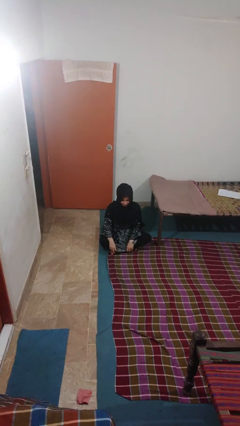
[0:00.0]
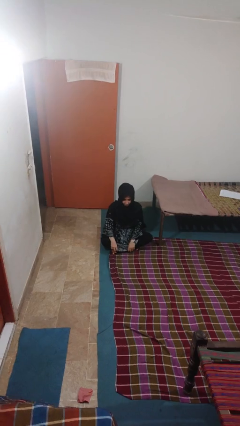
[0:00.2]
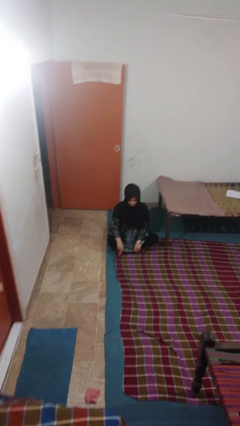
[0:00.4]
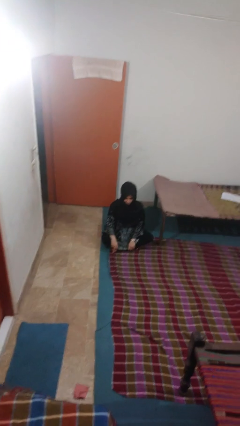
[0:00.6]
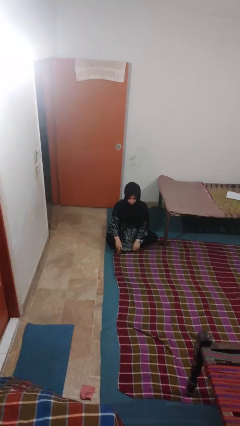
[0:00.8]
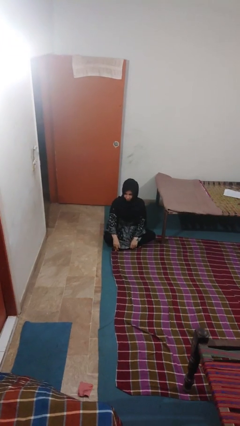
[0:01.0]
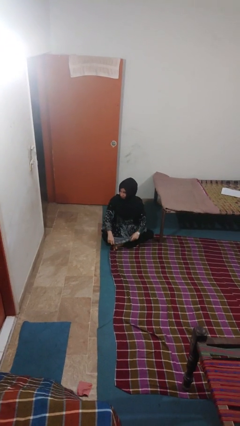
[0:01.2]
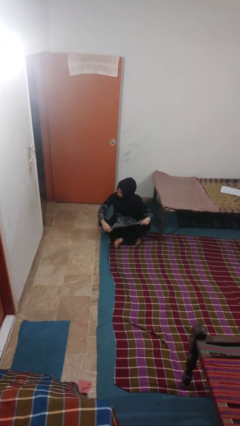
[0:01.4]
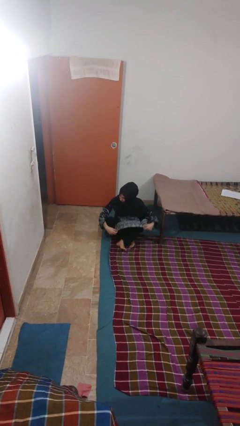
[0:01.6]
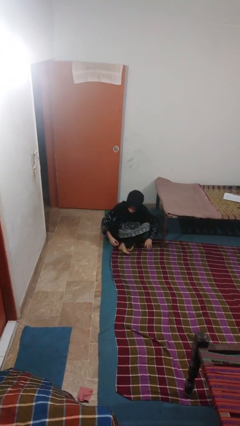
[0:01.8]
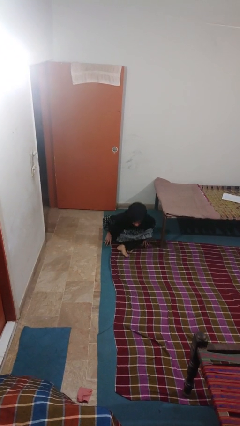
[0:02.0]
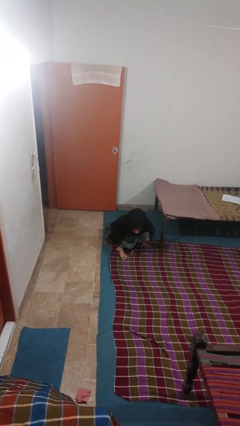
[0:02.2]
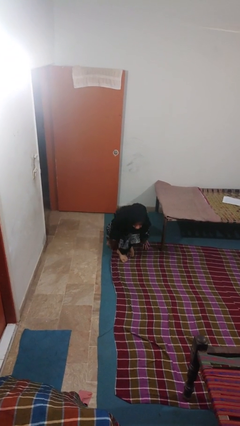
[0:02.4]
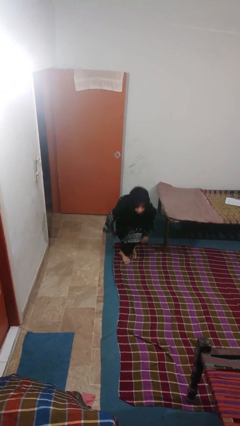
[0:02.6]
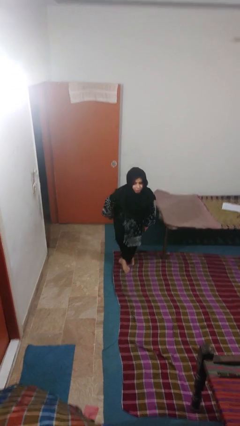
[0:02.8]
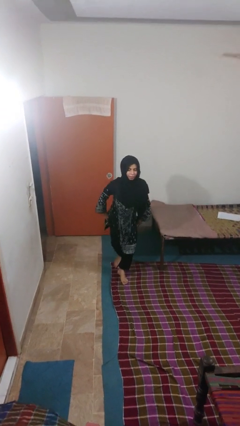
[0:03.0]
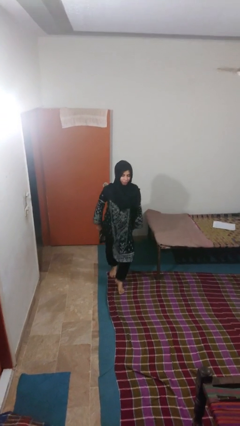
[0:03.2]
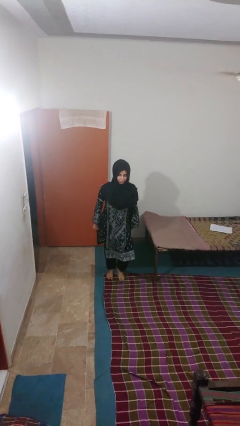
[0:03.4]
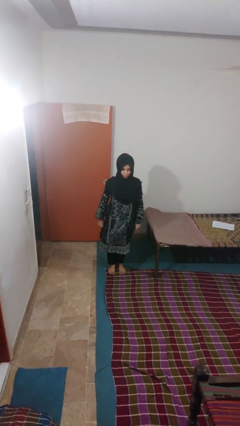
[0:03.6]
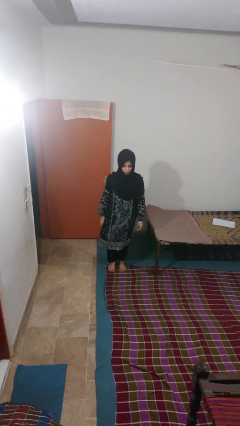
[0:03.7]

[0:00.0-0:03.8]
person stands up from floor

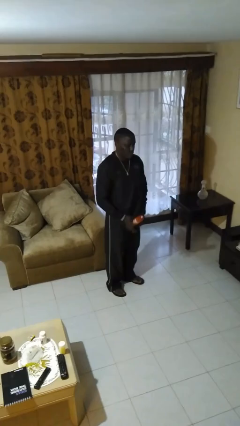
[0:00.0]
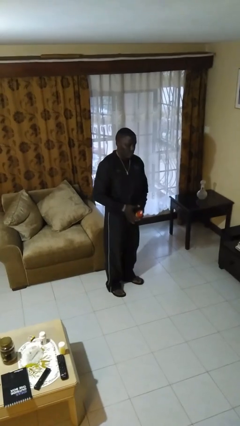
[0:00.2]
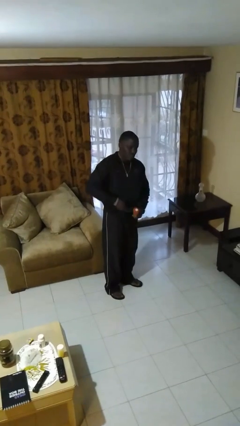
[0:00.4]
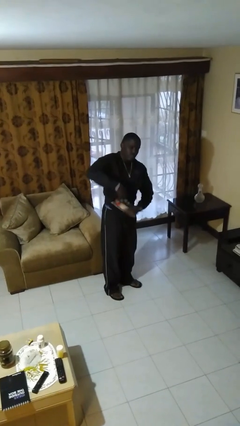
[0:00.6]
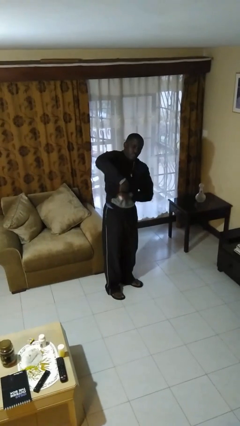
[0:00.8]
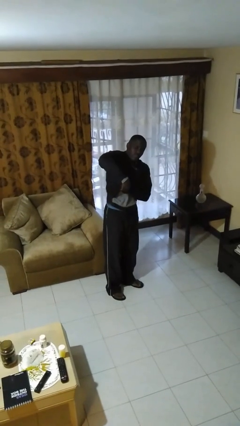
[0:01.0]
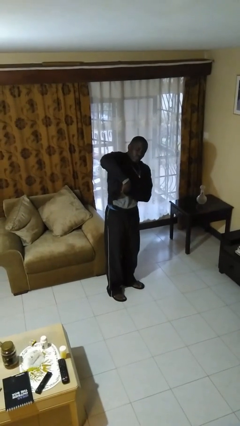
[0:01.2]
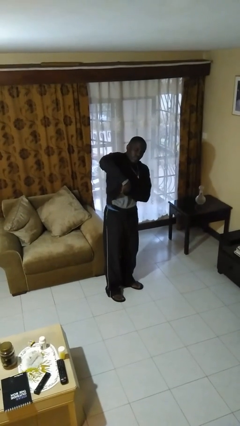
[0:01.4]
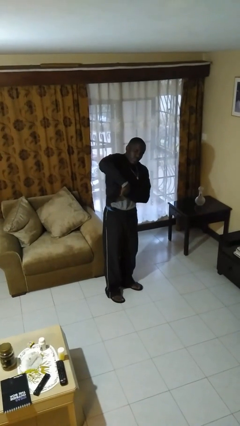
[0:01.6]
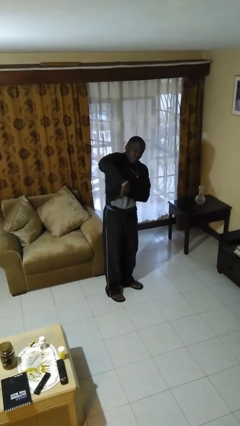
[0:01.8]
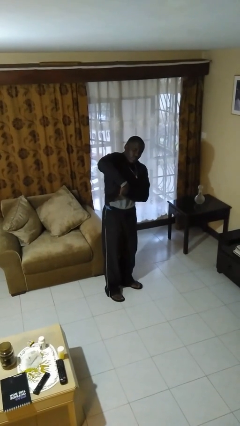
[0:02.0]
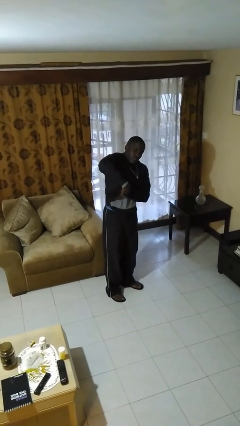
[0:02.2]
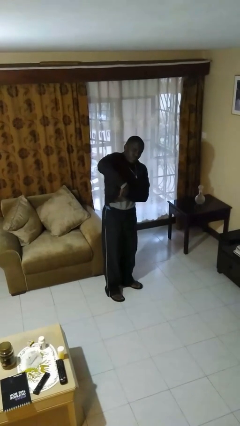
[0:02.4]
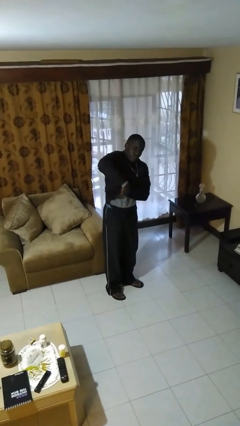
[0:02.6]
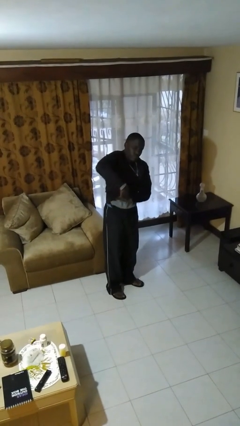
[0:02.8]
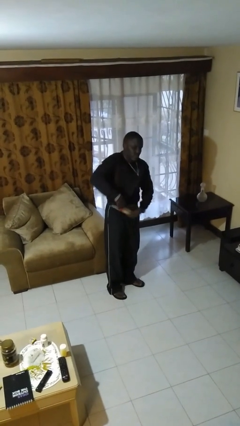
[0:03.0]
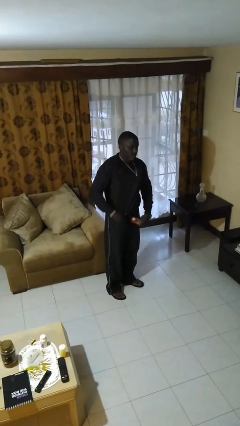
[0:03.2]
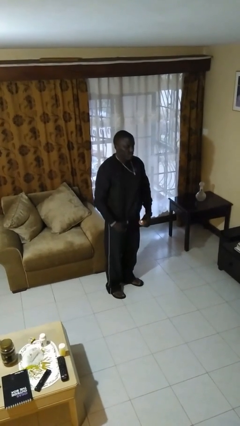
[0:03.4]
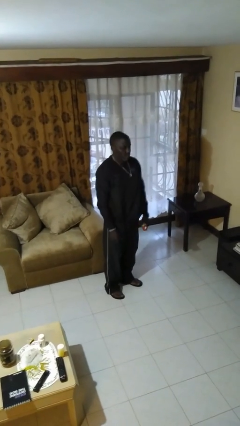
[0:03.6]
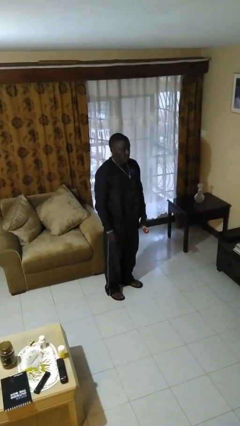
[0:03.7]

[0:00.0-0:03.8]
person applies deodorant

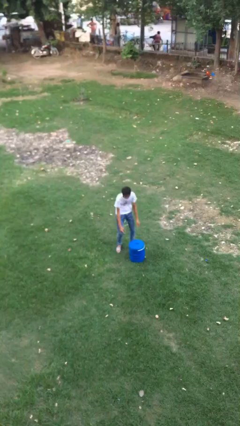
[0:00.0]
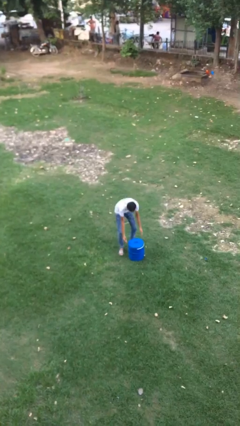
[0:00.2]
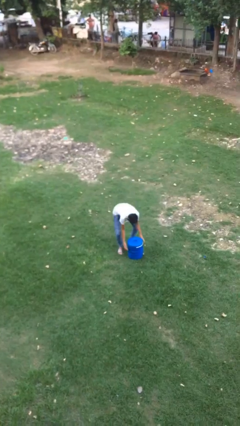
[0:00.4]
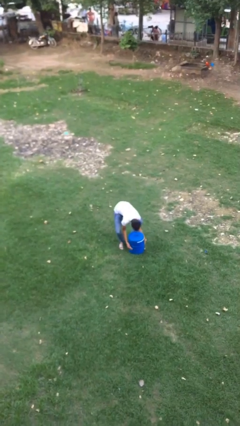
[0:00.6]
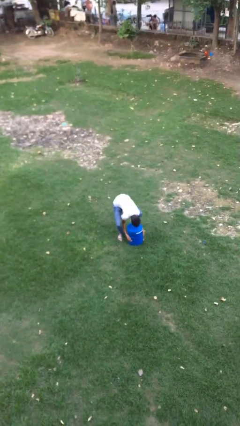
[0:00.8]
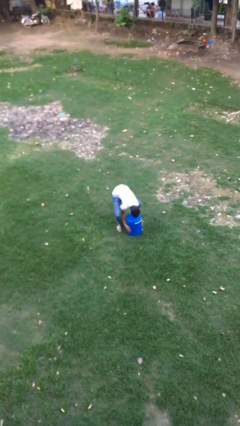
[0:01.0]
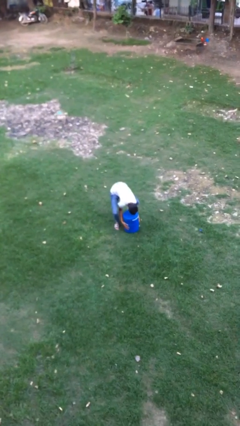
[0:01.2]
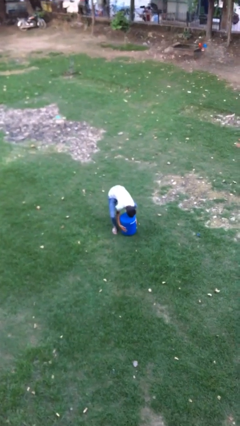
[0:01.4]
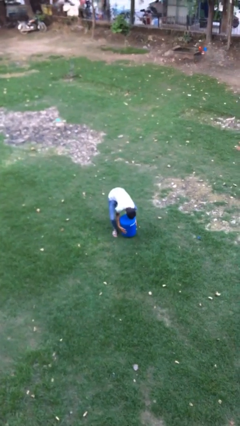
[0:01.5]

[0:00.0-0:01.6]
person picks up object from floor

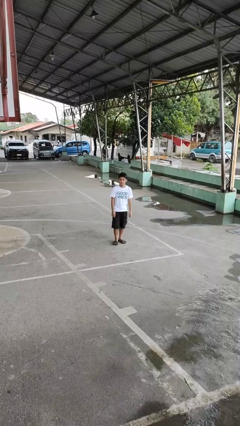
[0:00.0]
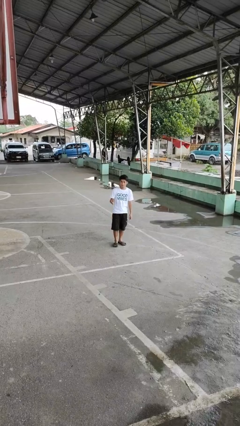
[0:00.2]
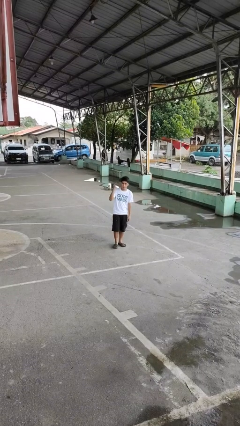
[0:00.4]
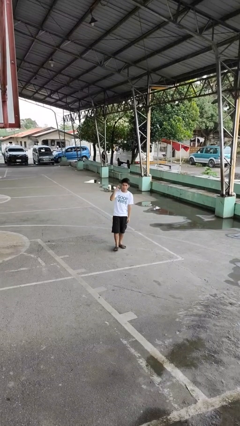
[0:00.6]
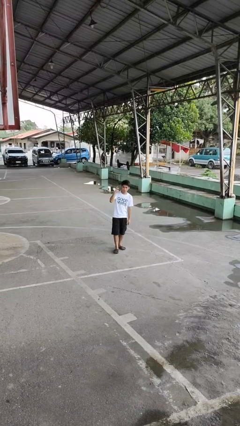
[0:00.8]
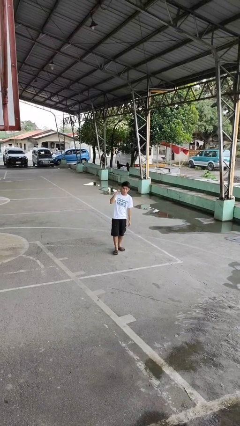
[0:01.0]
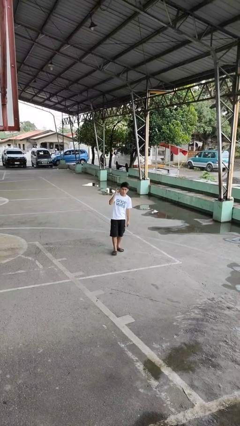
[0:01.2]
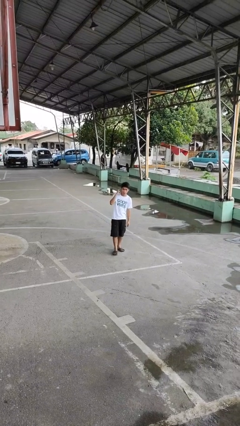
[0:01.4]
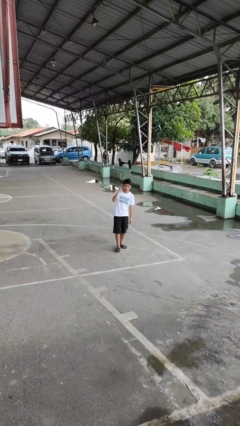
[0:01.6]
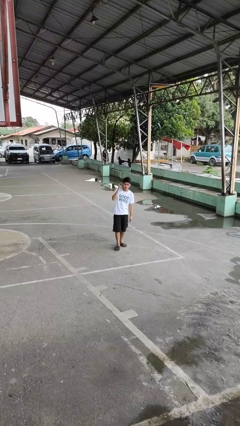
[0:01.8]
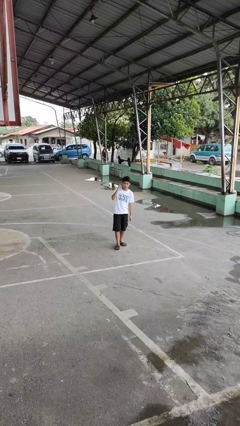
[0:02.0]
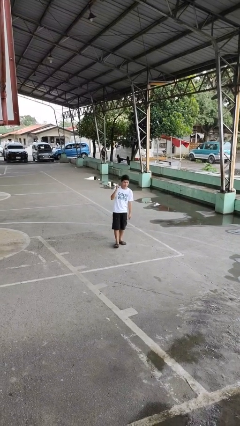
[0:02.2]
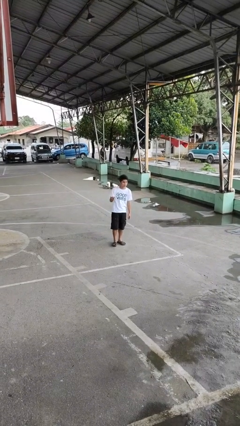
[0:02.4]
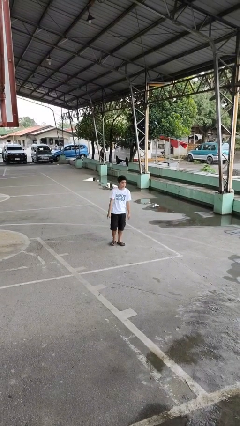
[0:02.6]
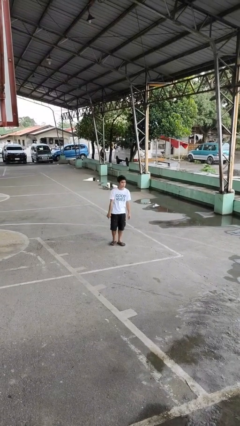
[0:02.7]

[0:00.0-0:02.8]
person gestures listen closely

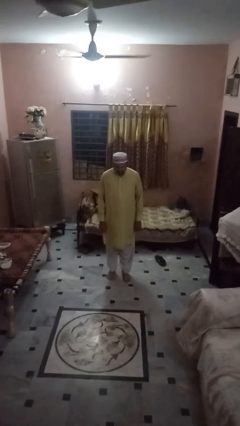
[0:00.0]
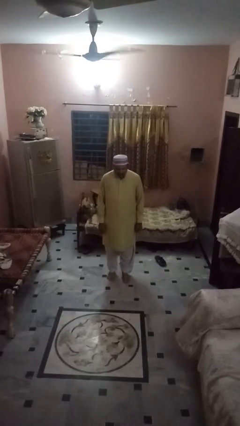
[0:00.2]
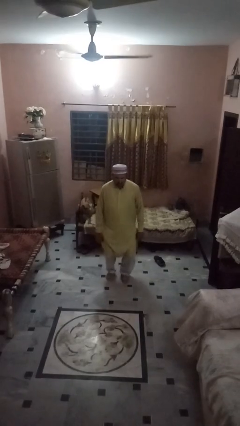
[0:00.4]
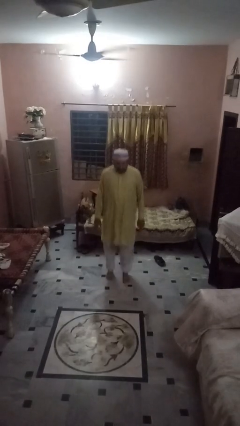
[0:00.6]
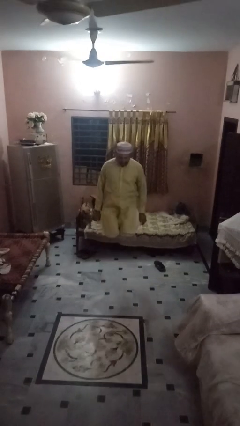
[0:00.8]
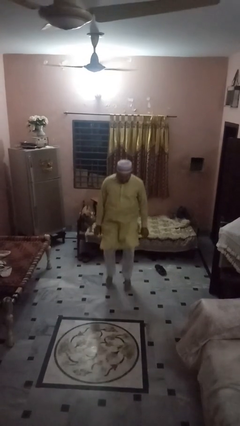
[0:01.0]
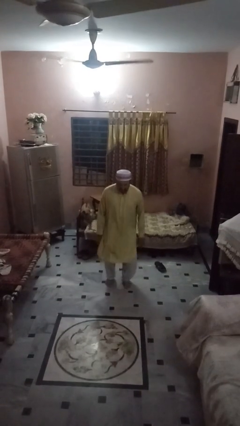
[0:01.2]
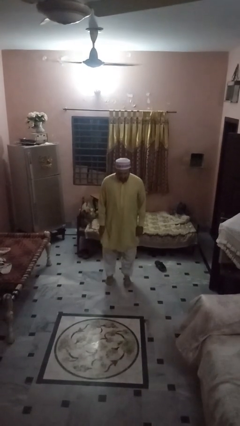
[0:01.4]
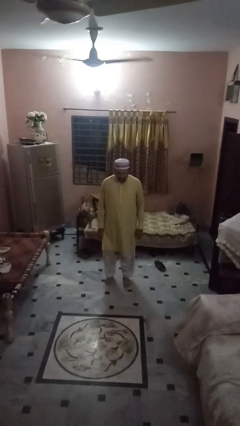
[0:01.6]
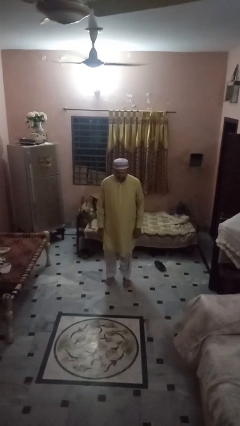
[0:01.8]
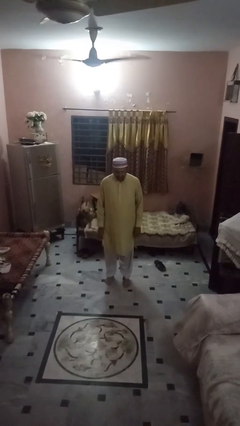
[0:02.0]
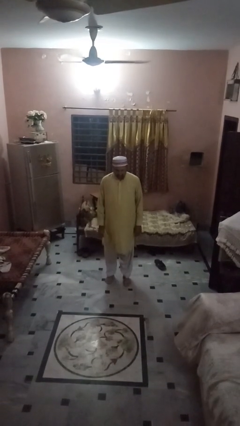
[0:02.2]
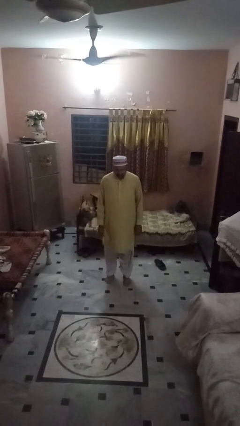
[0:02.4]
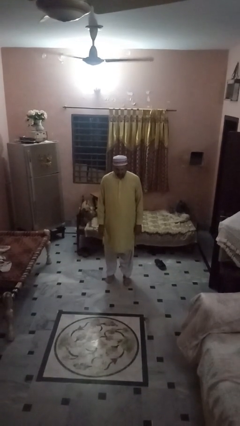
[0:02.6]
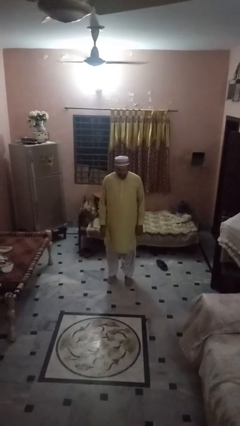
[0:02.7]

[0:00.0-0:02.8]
person jumps

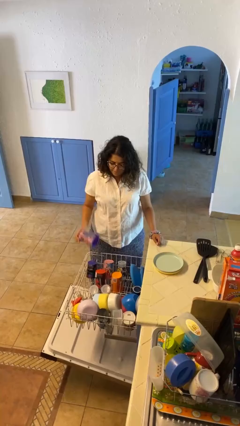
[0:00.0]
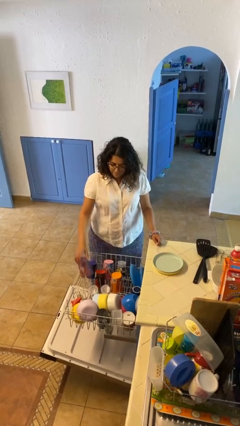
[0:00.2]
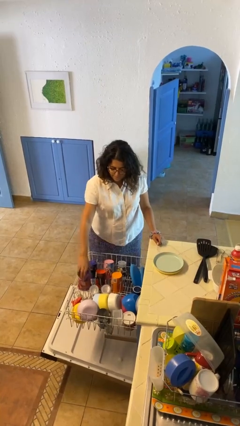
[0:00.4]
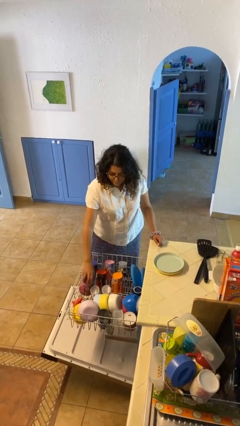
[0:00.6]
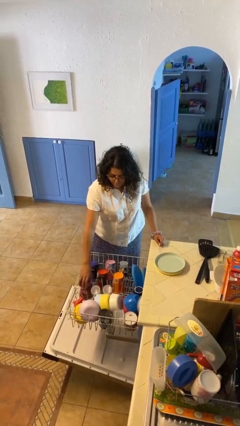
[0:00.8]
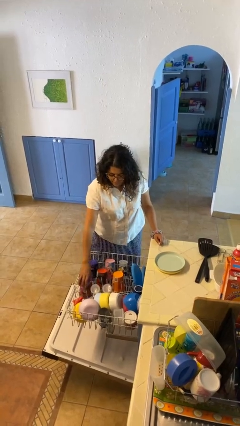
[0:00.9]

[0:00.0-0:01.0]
person loads dishwasher

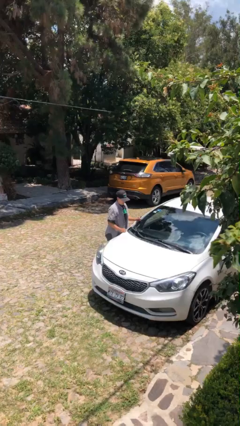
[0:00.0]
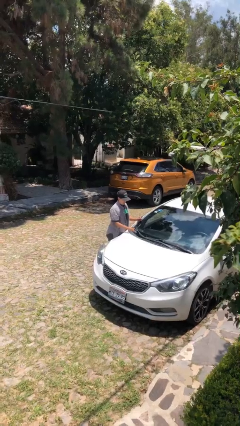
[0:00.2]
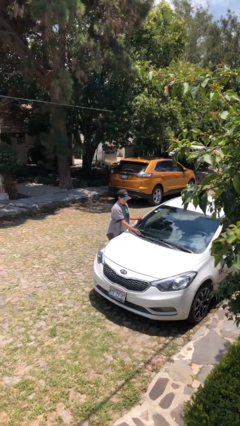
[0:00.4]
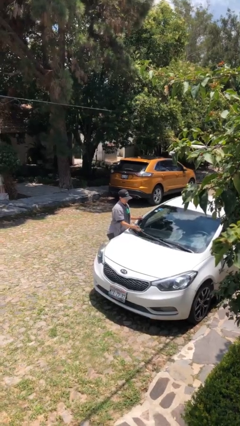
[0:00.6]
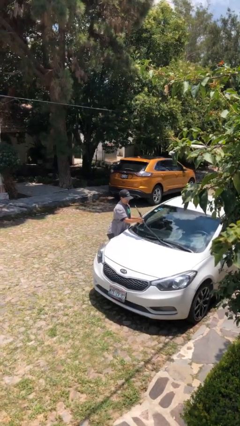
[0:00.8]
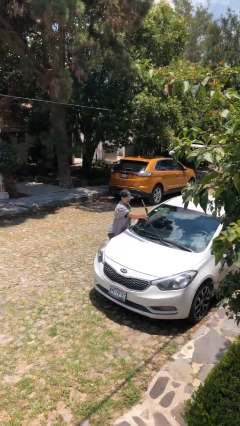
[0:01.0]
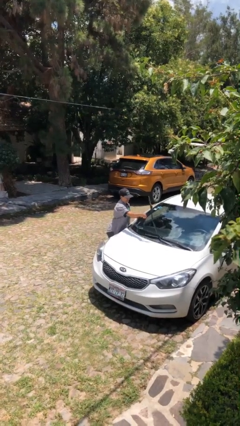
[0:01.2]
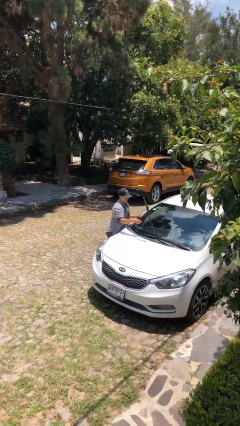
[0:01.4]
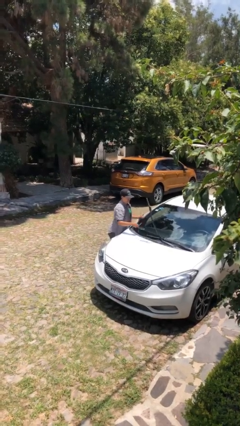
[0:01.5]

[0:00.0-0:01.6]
person flips up car wipers
